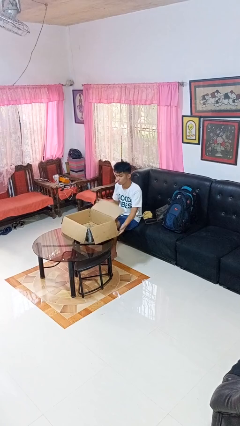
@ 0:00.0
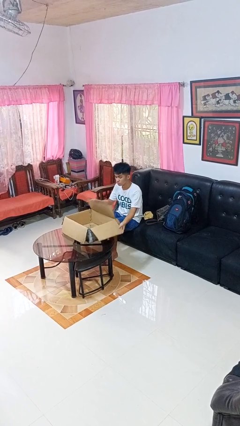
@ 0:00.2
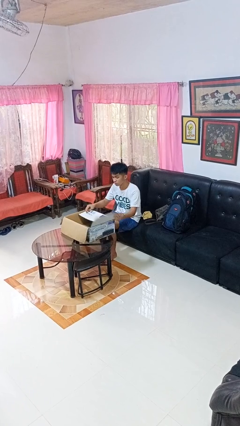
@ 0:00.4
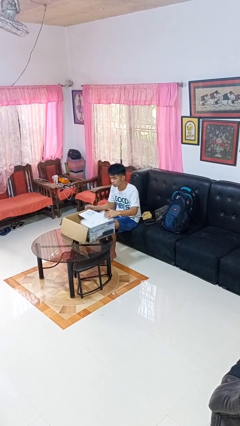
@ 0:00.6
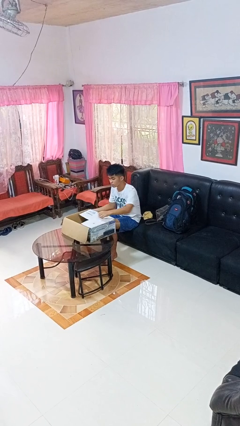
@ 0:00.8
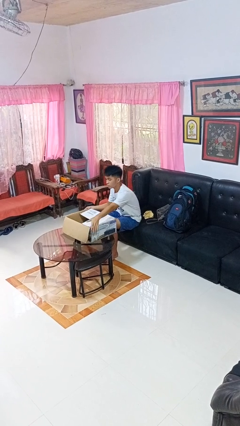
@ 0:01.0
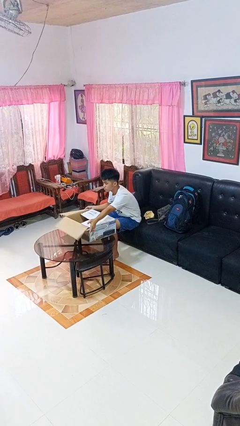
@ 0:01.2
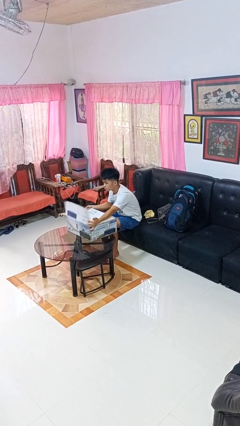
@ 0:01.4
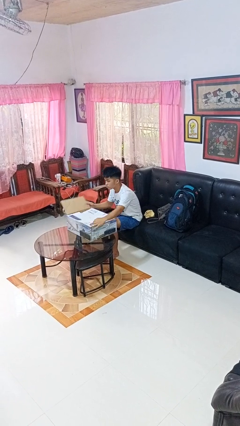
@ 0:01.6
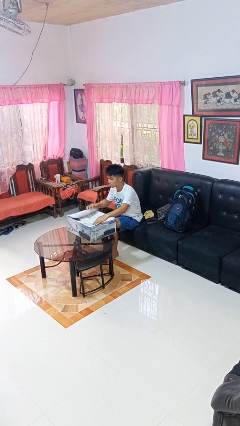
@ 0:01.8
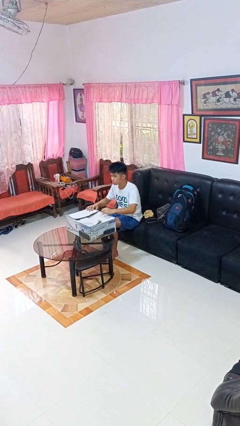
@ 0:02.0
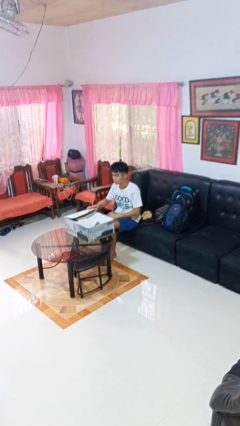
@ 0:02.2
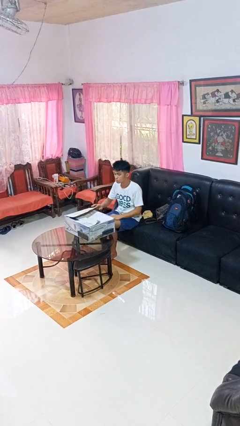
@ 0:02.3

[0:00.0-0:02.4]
person closes box

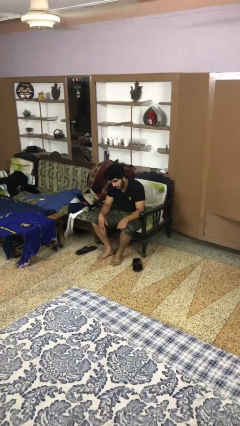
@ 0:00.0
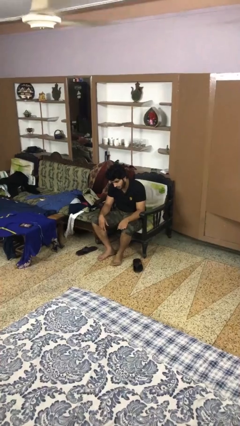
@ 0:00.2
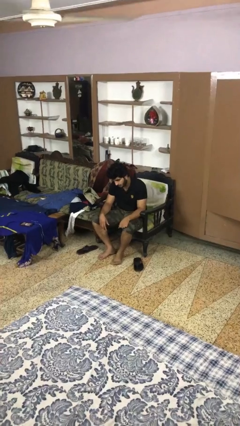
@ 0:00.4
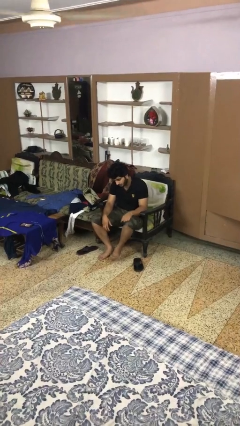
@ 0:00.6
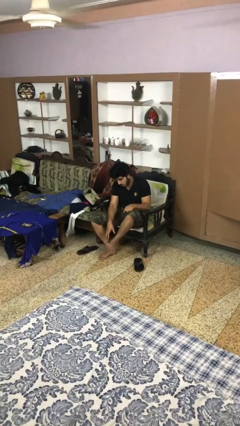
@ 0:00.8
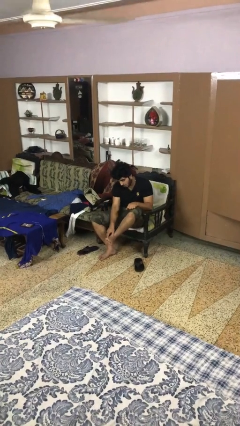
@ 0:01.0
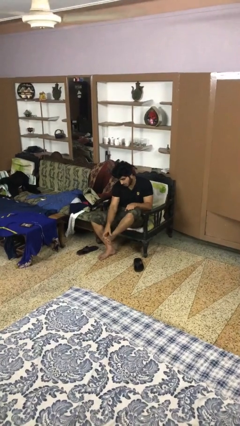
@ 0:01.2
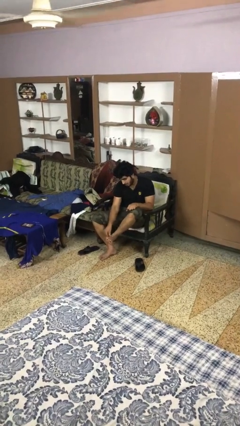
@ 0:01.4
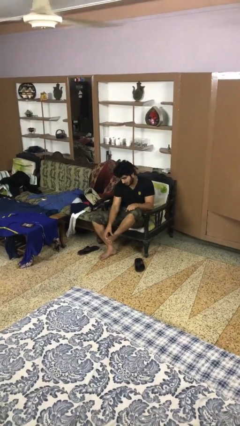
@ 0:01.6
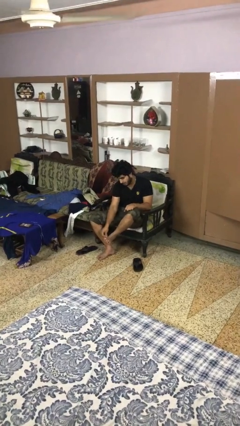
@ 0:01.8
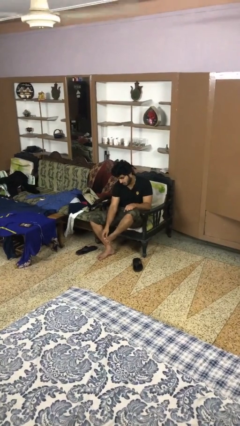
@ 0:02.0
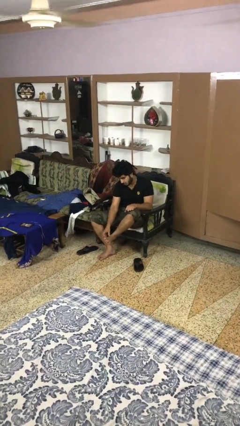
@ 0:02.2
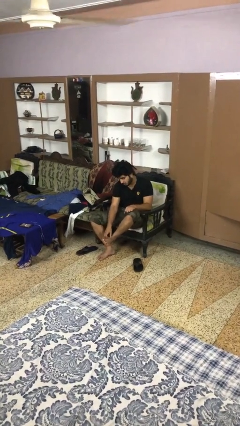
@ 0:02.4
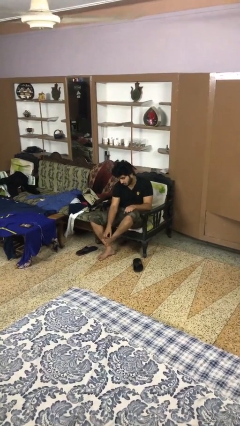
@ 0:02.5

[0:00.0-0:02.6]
person rubs foot

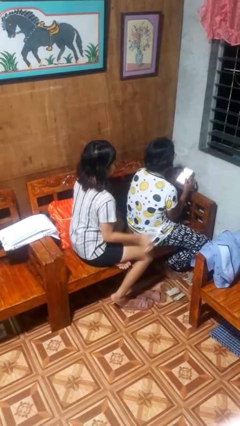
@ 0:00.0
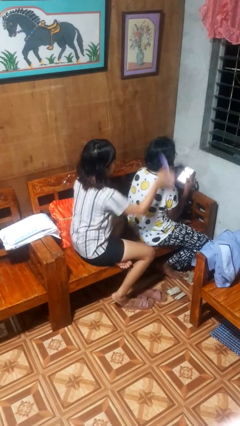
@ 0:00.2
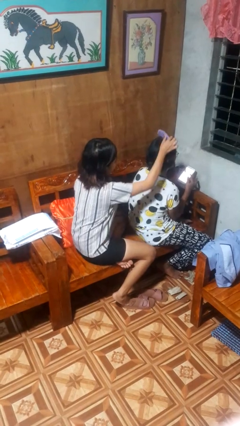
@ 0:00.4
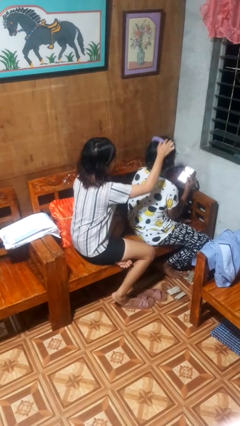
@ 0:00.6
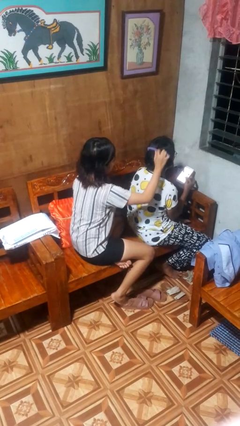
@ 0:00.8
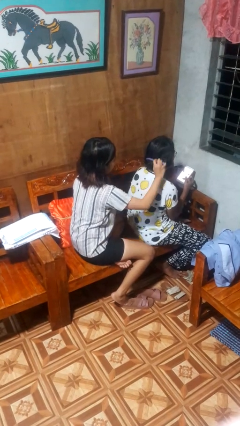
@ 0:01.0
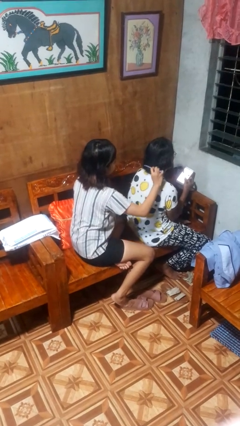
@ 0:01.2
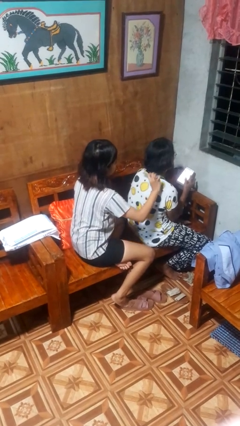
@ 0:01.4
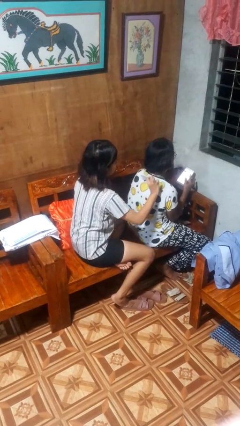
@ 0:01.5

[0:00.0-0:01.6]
person brushes hair of person

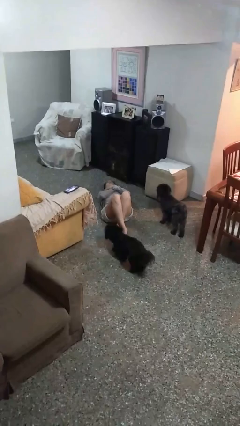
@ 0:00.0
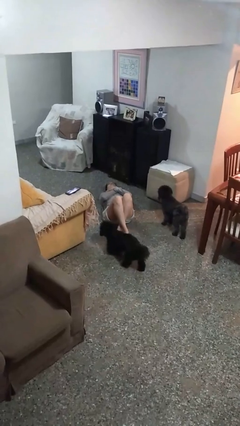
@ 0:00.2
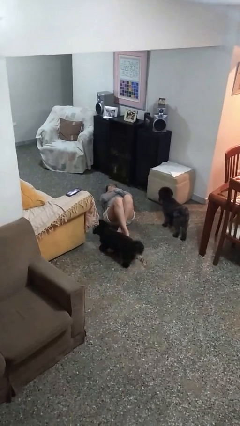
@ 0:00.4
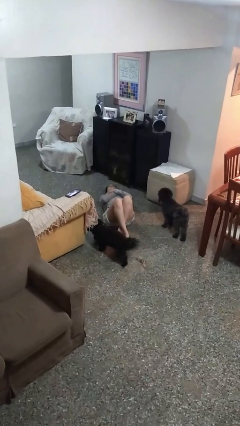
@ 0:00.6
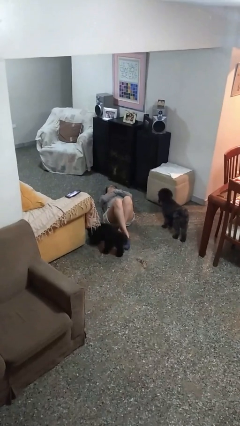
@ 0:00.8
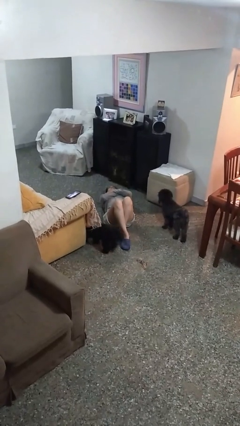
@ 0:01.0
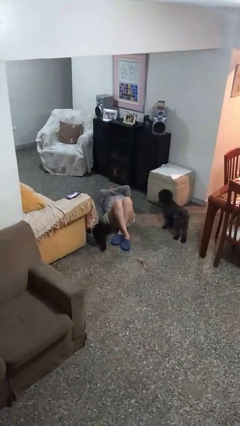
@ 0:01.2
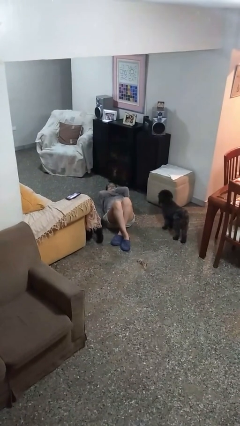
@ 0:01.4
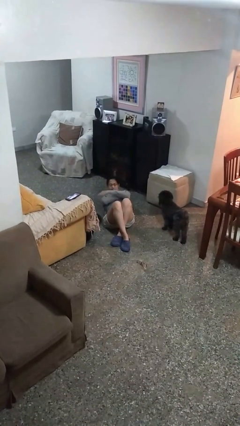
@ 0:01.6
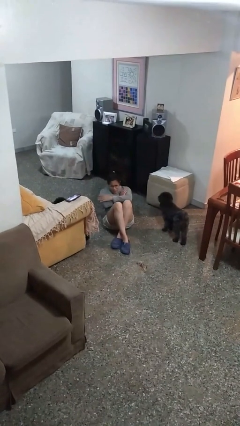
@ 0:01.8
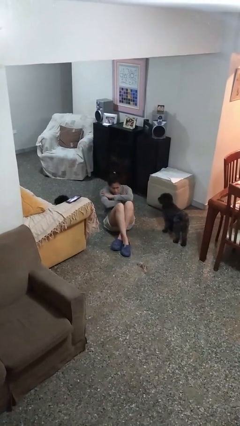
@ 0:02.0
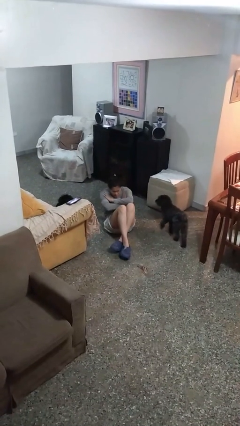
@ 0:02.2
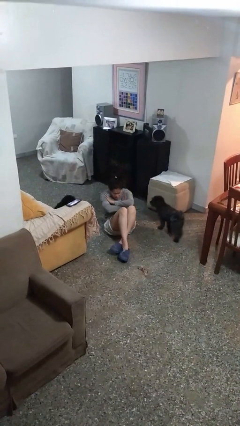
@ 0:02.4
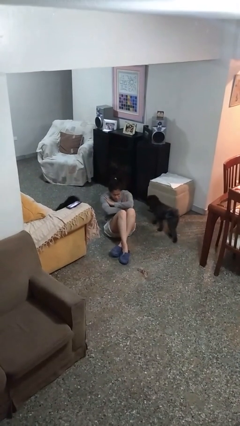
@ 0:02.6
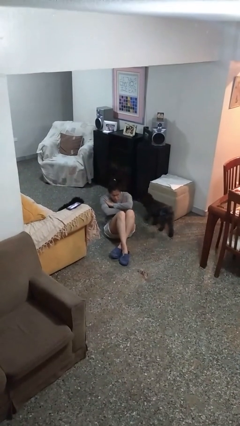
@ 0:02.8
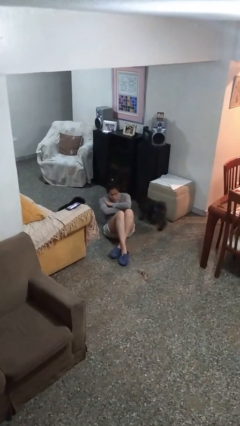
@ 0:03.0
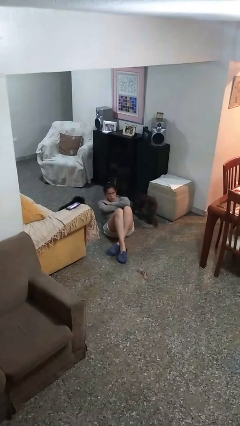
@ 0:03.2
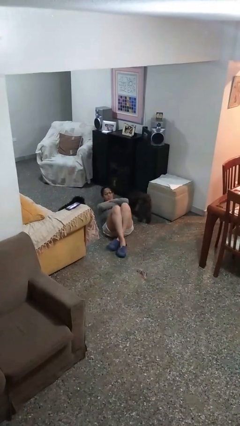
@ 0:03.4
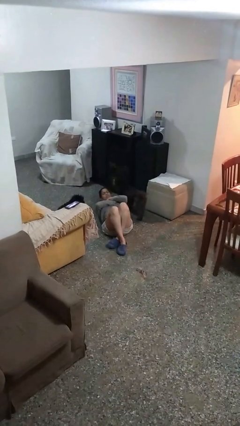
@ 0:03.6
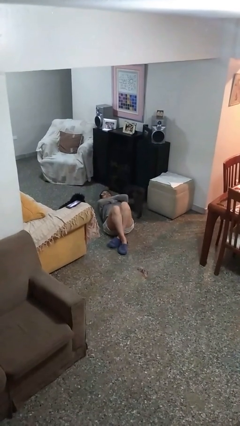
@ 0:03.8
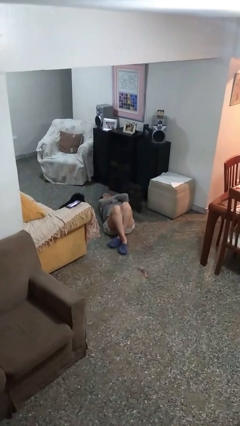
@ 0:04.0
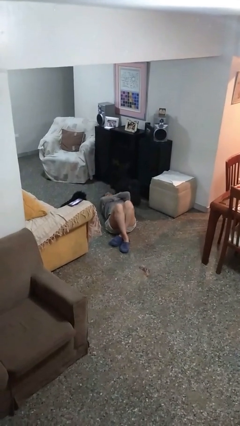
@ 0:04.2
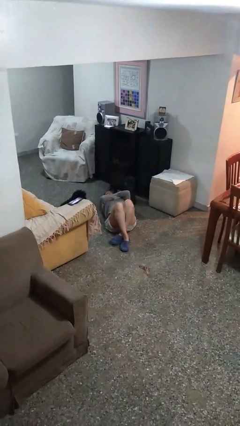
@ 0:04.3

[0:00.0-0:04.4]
person exercises with situp

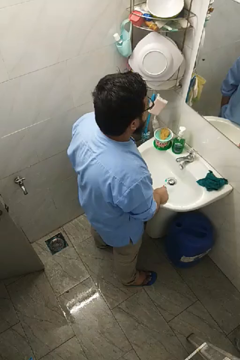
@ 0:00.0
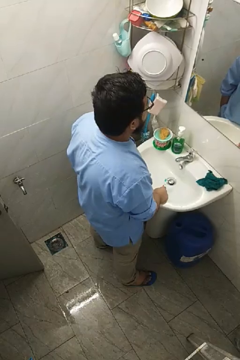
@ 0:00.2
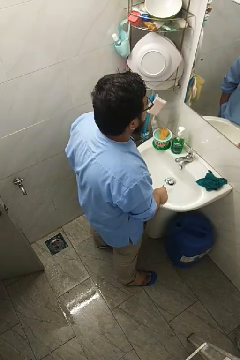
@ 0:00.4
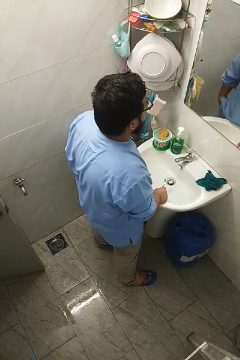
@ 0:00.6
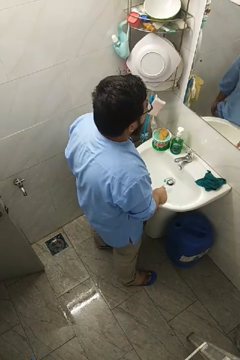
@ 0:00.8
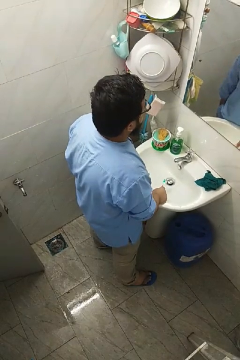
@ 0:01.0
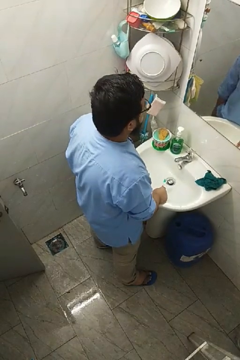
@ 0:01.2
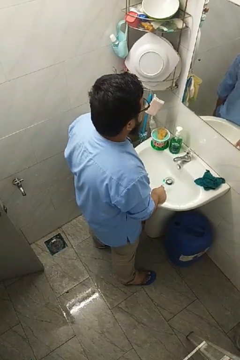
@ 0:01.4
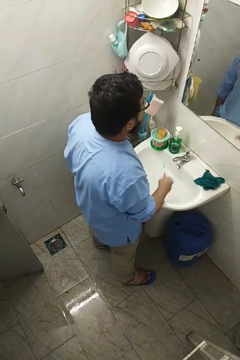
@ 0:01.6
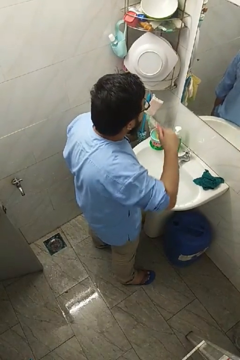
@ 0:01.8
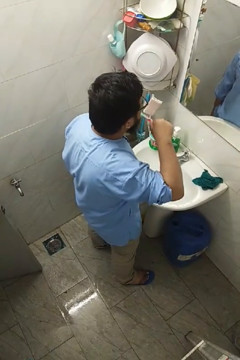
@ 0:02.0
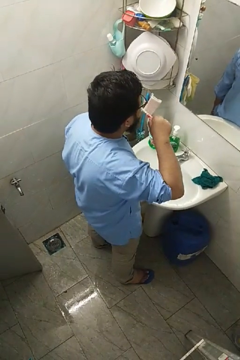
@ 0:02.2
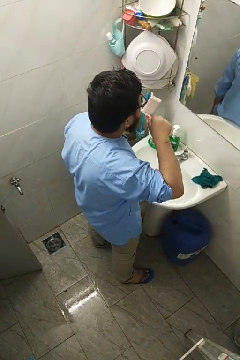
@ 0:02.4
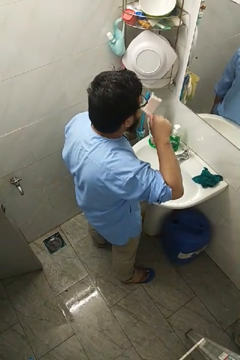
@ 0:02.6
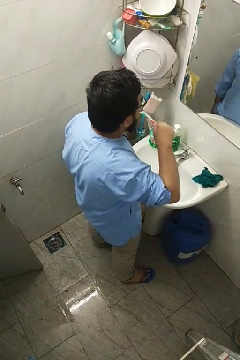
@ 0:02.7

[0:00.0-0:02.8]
person brushes teeth

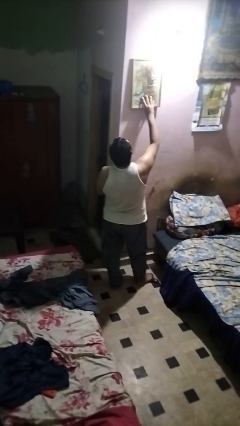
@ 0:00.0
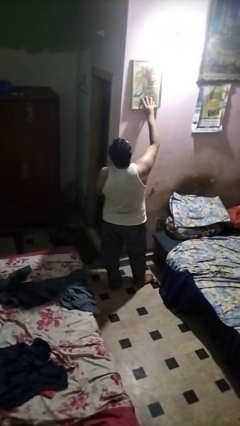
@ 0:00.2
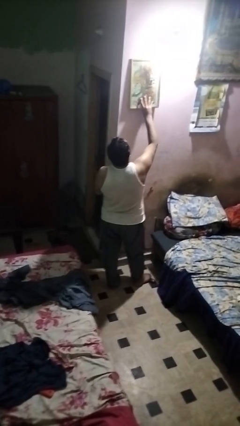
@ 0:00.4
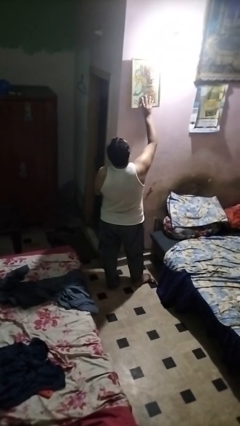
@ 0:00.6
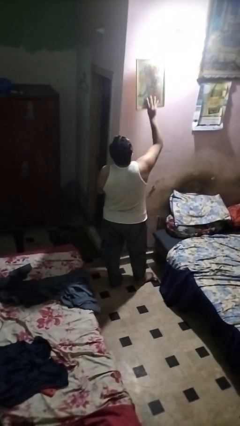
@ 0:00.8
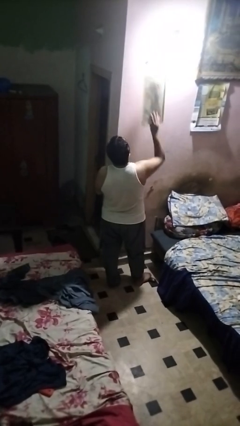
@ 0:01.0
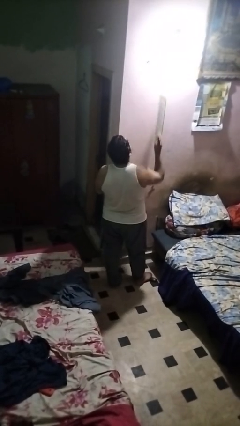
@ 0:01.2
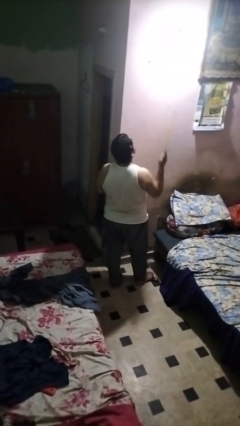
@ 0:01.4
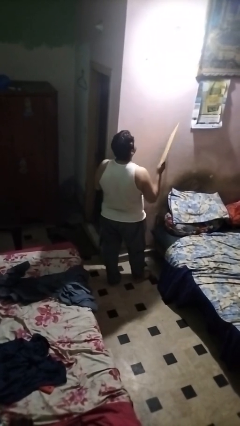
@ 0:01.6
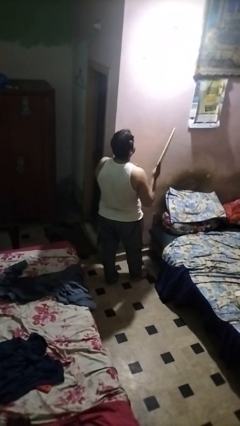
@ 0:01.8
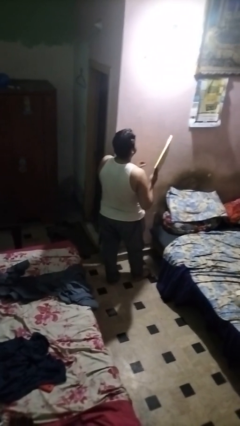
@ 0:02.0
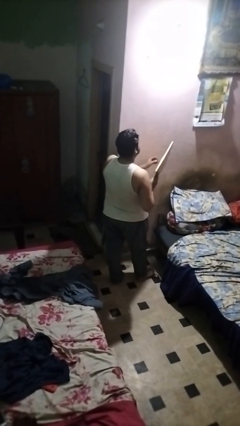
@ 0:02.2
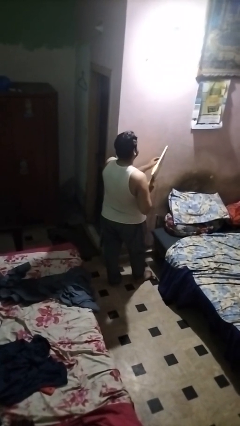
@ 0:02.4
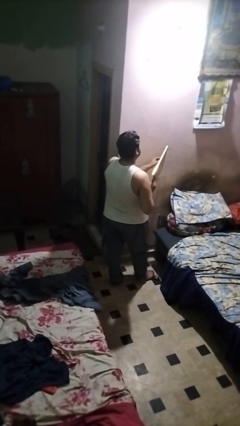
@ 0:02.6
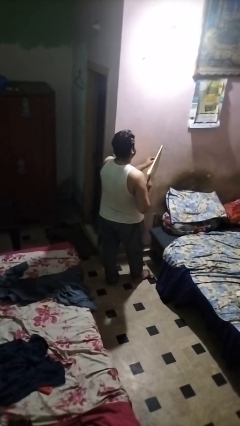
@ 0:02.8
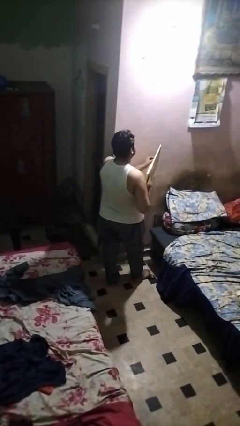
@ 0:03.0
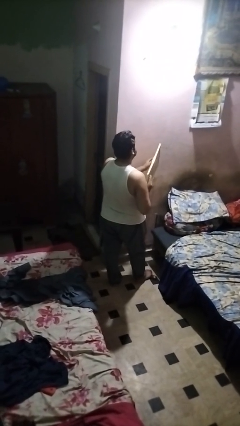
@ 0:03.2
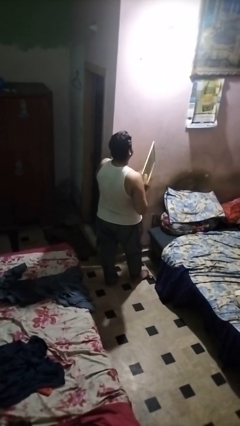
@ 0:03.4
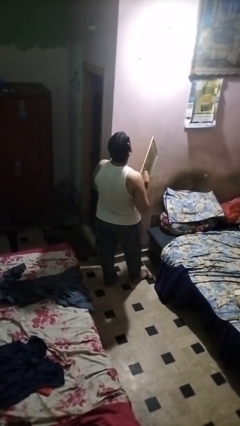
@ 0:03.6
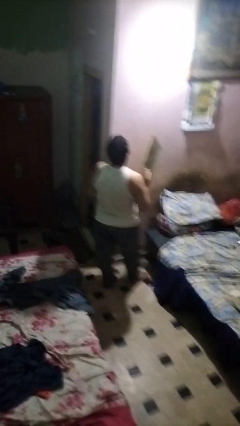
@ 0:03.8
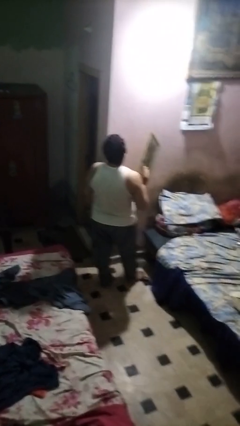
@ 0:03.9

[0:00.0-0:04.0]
person takes down picture frame

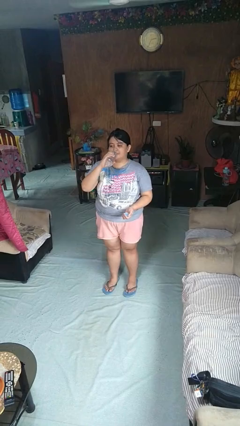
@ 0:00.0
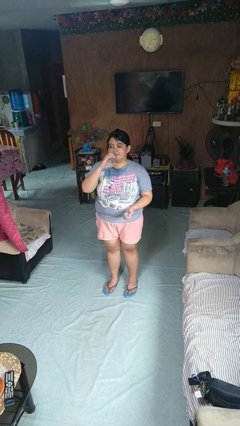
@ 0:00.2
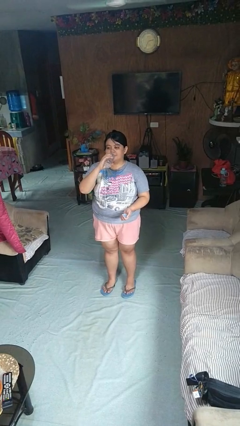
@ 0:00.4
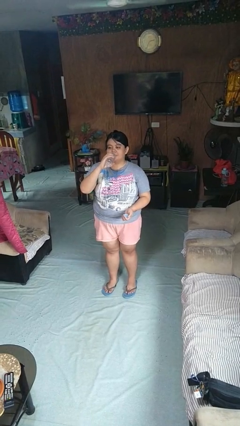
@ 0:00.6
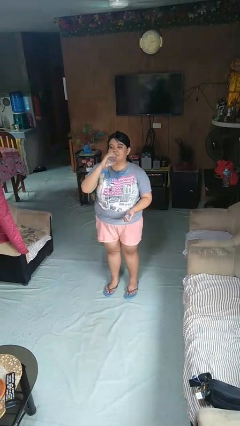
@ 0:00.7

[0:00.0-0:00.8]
person drinks from bottle
